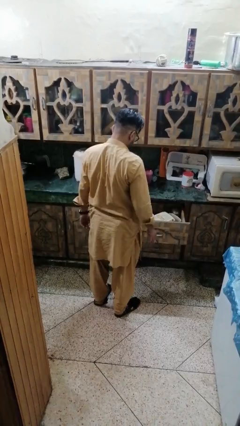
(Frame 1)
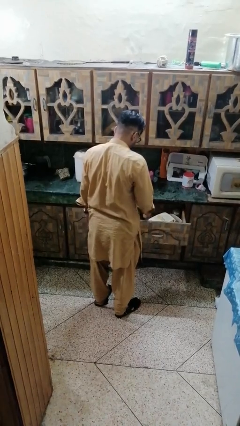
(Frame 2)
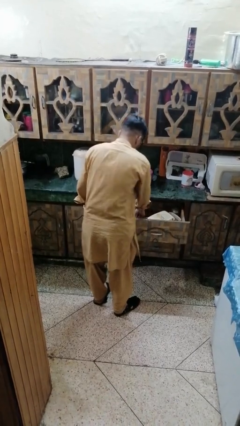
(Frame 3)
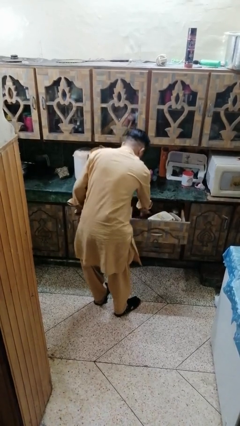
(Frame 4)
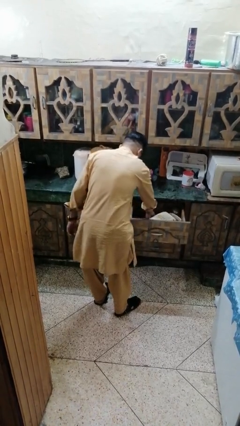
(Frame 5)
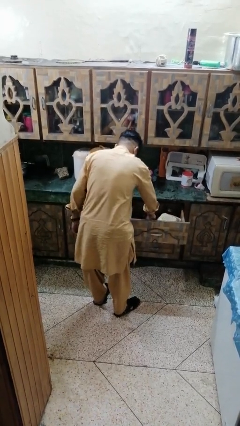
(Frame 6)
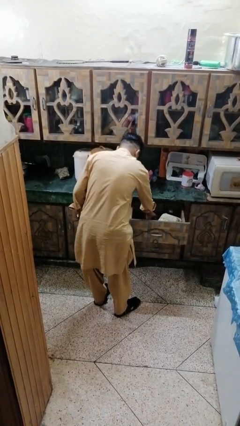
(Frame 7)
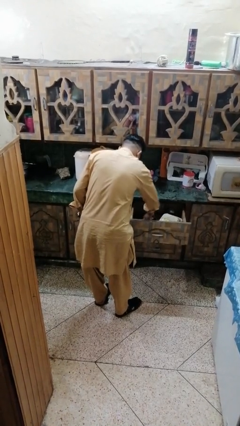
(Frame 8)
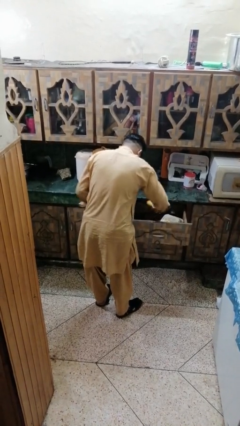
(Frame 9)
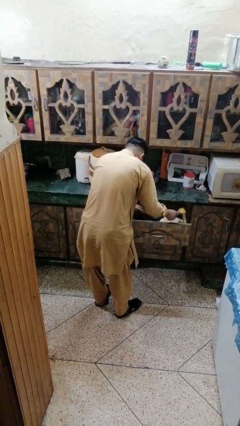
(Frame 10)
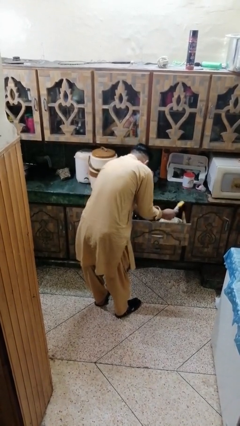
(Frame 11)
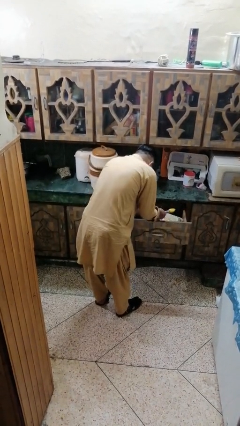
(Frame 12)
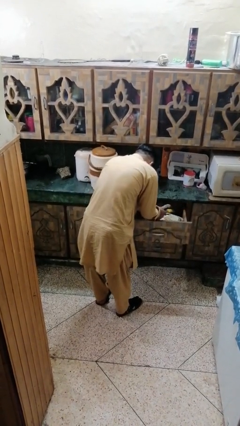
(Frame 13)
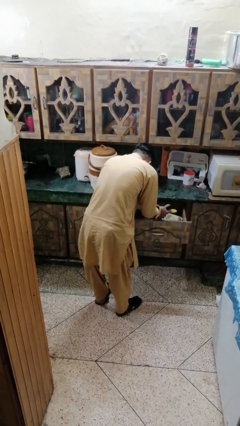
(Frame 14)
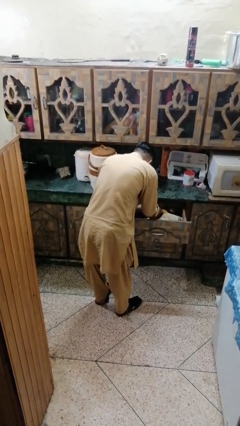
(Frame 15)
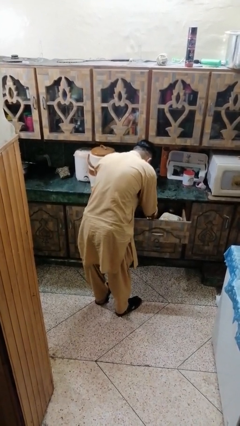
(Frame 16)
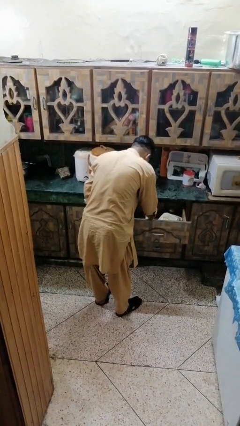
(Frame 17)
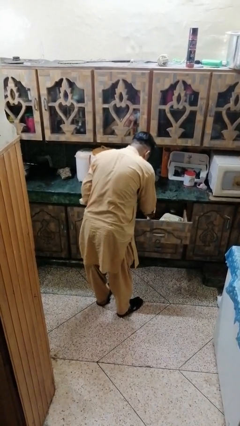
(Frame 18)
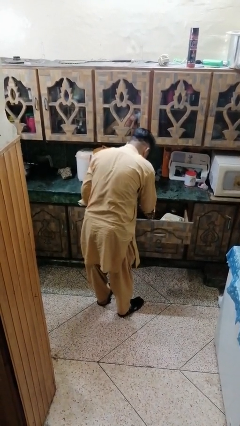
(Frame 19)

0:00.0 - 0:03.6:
person searches in kitchen drawer

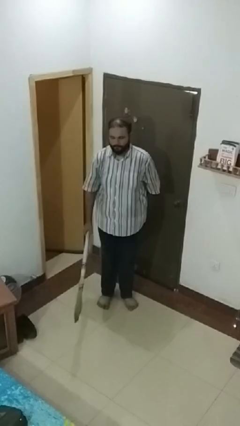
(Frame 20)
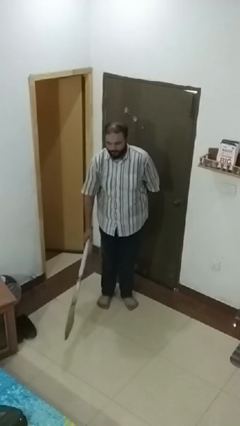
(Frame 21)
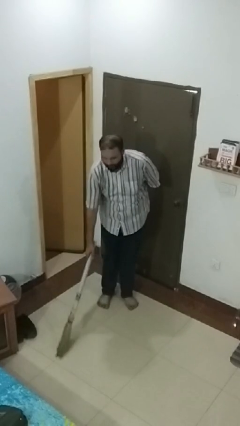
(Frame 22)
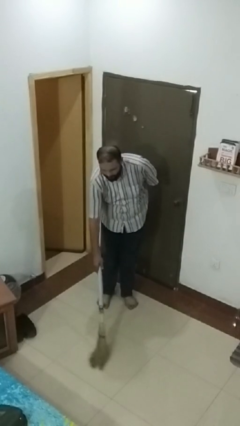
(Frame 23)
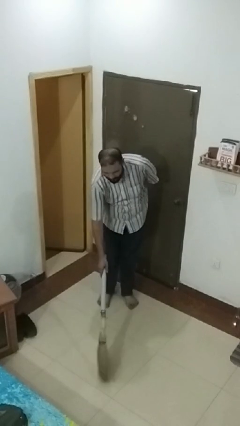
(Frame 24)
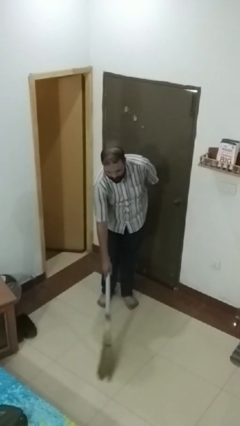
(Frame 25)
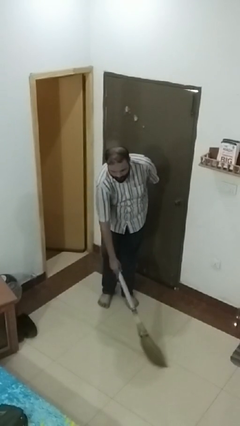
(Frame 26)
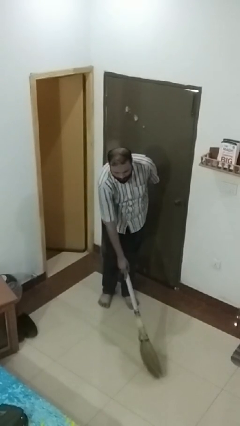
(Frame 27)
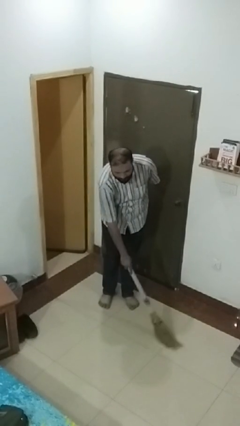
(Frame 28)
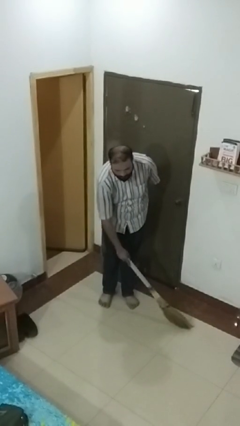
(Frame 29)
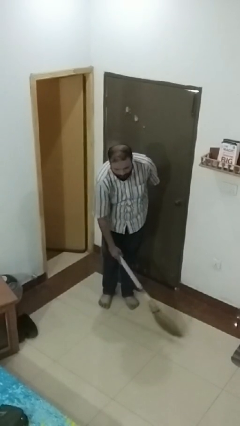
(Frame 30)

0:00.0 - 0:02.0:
person sweeps floor

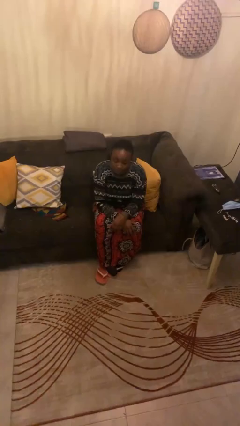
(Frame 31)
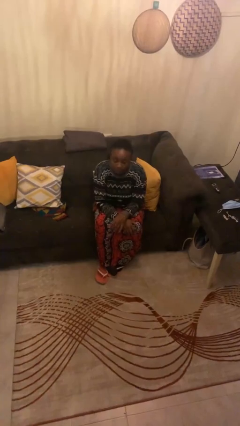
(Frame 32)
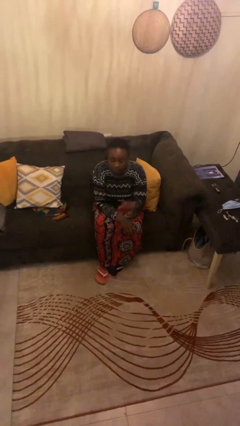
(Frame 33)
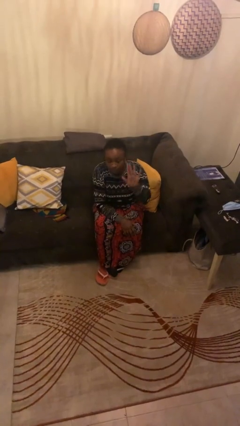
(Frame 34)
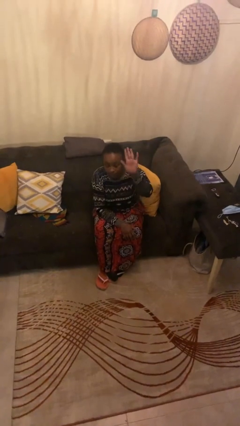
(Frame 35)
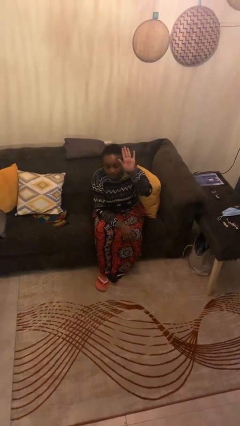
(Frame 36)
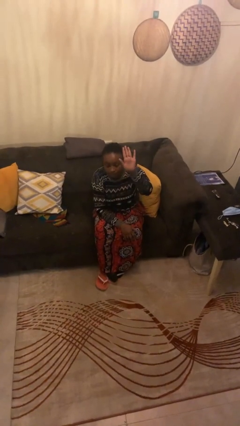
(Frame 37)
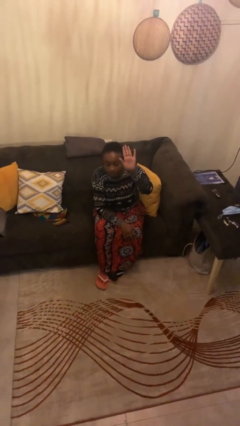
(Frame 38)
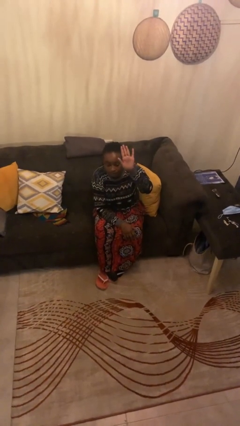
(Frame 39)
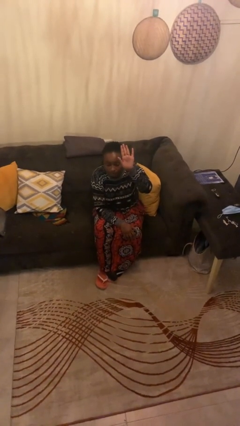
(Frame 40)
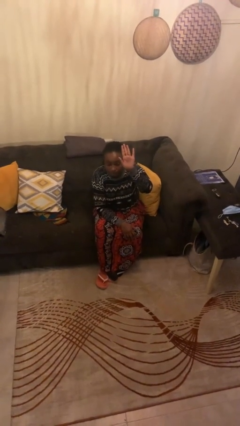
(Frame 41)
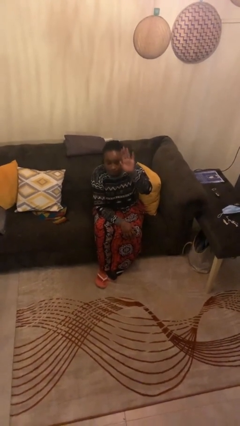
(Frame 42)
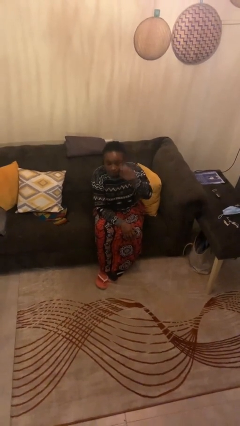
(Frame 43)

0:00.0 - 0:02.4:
person gestures raise hand

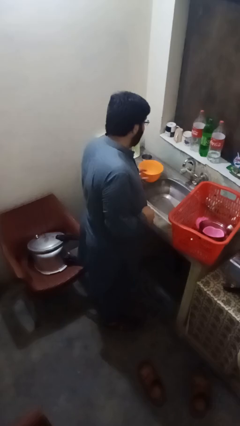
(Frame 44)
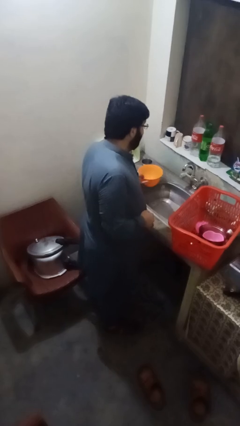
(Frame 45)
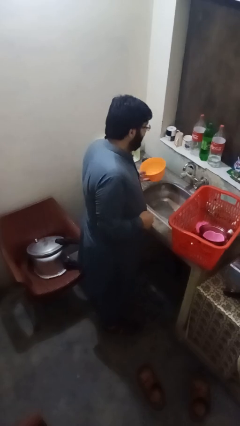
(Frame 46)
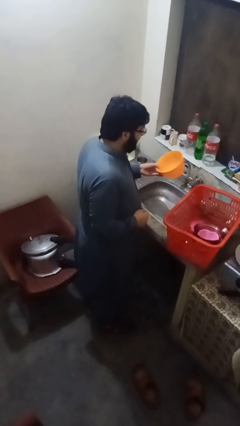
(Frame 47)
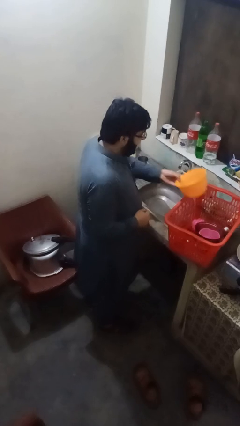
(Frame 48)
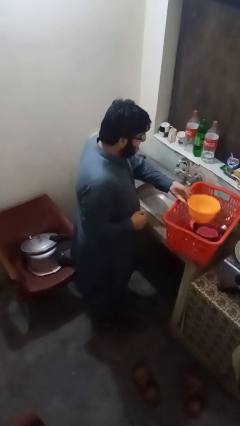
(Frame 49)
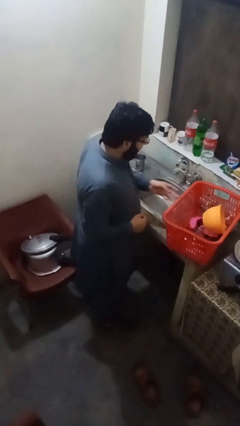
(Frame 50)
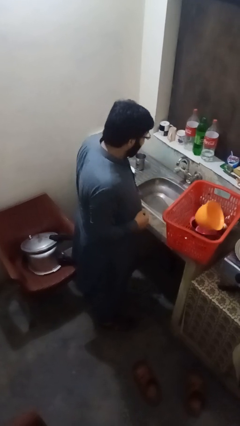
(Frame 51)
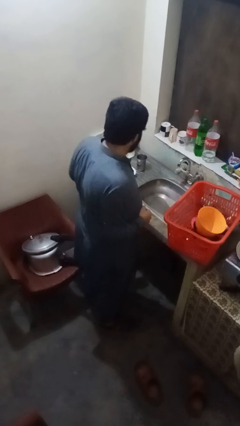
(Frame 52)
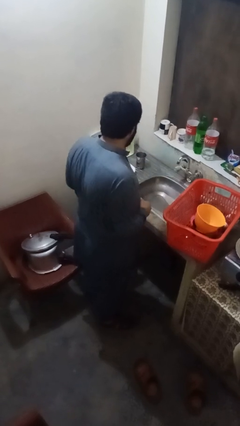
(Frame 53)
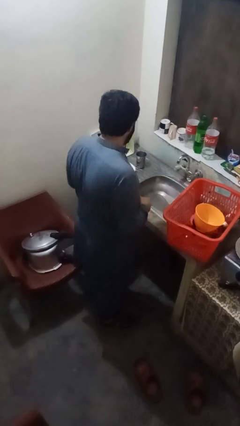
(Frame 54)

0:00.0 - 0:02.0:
person loads dishwasher

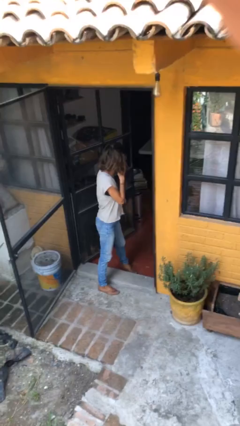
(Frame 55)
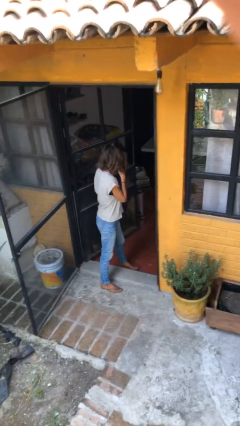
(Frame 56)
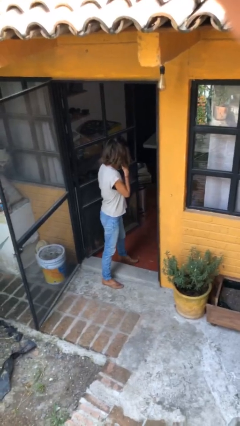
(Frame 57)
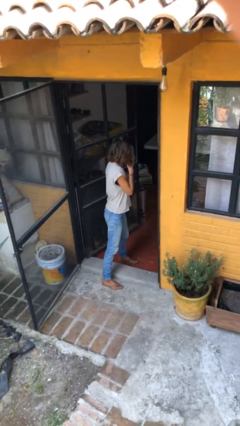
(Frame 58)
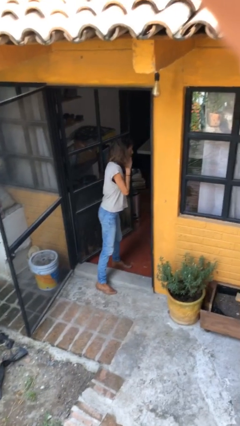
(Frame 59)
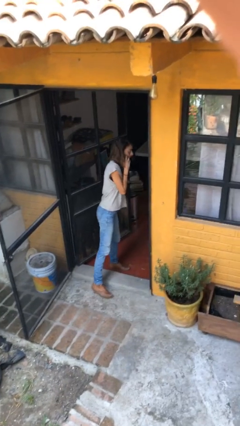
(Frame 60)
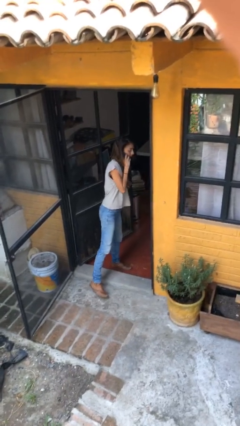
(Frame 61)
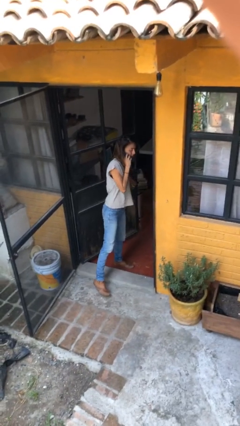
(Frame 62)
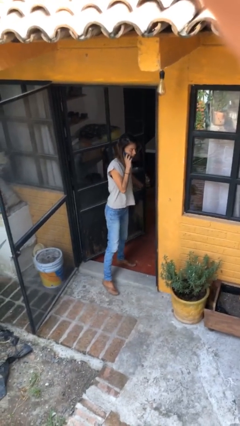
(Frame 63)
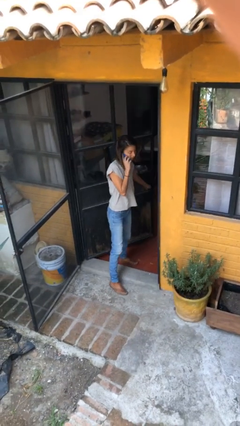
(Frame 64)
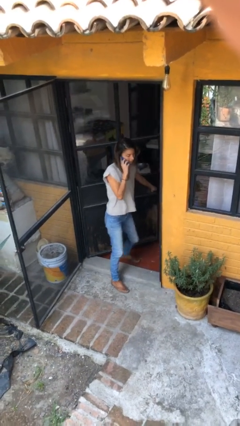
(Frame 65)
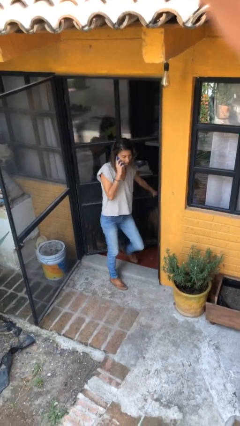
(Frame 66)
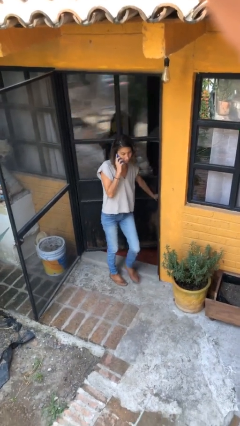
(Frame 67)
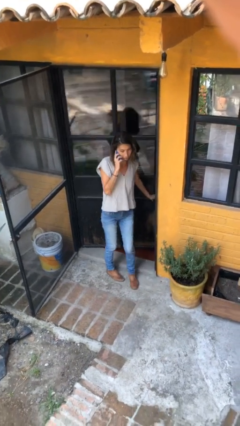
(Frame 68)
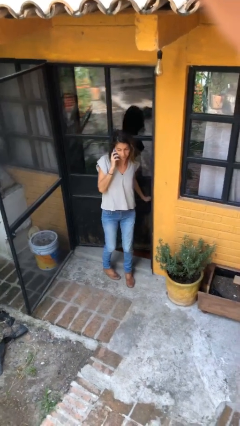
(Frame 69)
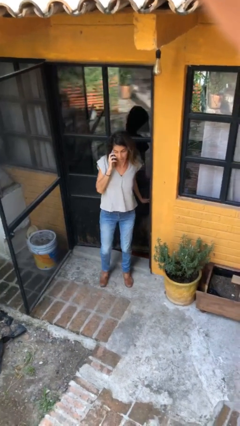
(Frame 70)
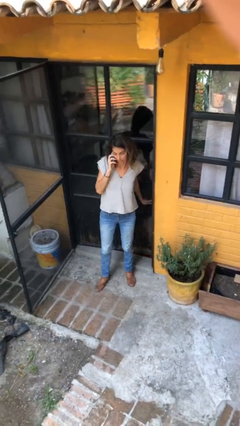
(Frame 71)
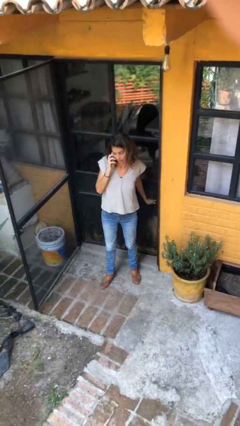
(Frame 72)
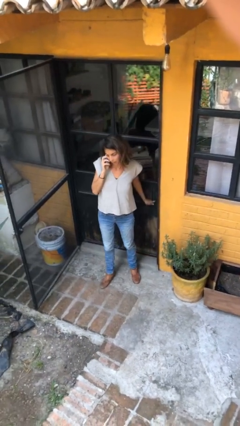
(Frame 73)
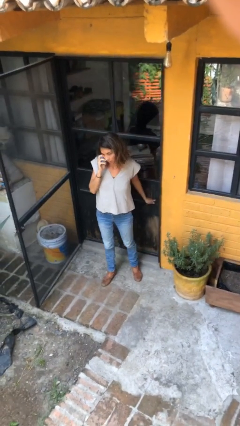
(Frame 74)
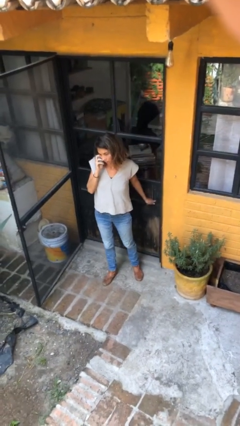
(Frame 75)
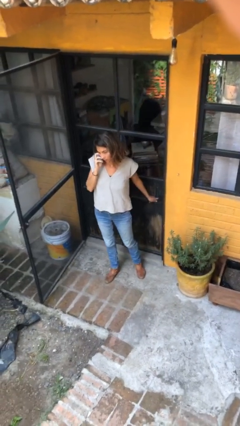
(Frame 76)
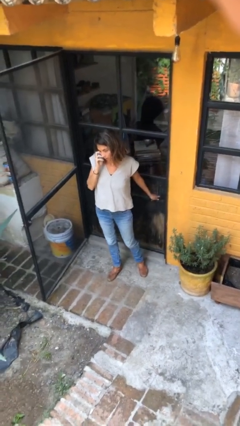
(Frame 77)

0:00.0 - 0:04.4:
person closes facility door

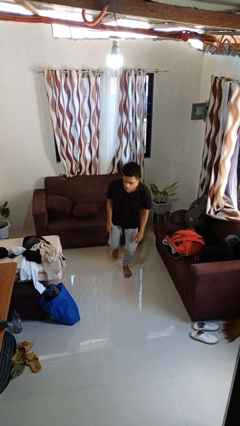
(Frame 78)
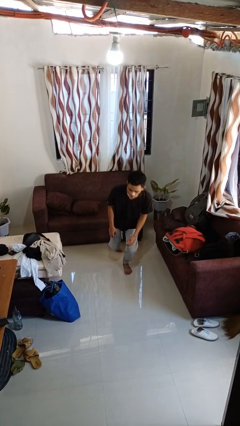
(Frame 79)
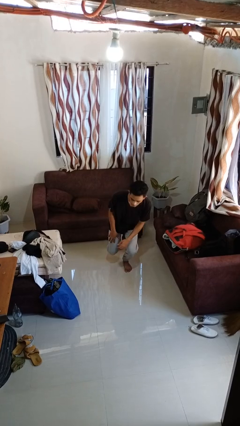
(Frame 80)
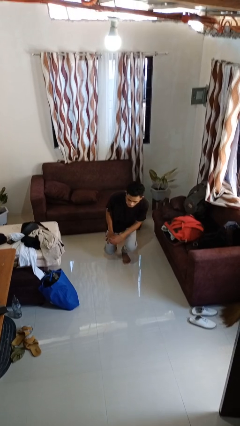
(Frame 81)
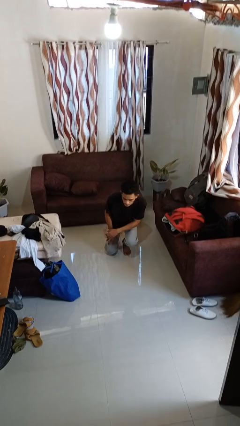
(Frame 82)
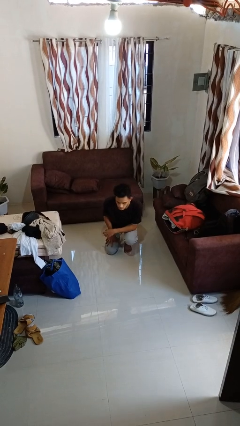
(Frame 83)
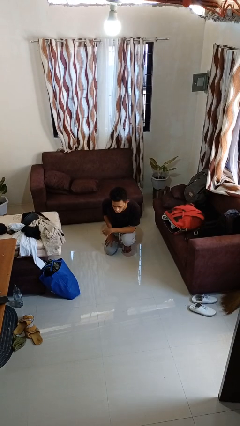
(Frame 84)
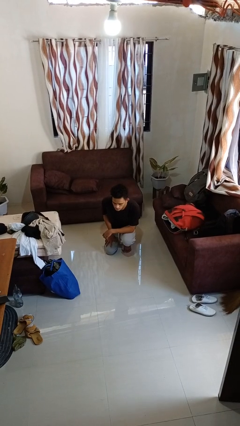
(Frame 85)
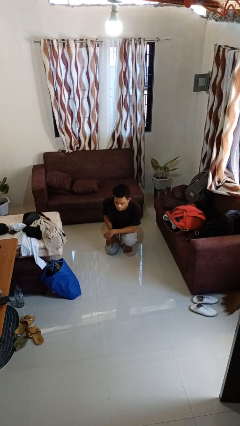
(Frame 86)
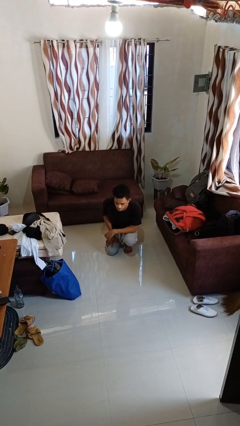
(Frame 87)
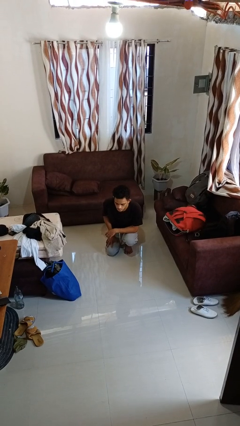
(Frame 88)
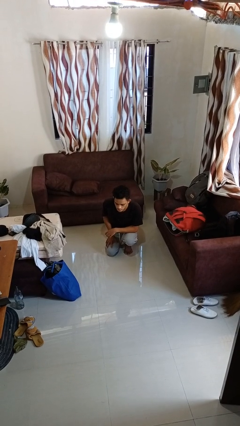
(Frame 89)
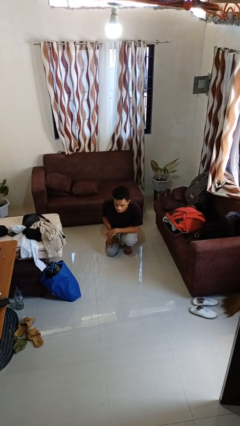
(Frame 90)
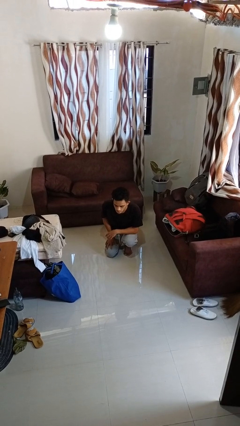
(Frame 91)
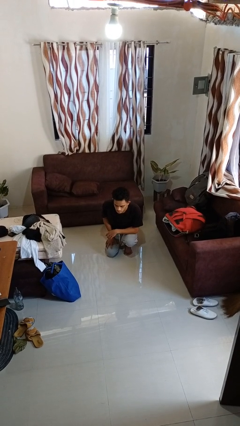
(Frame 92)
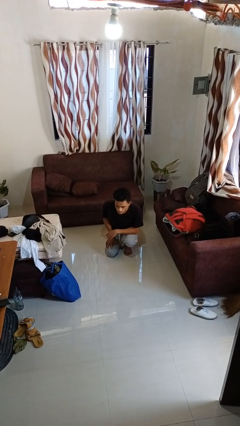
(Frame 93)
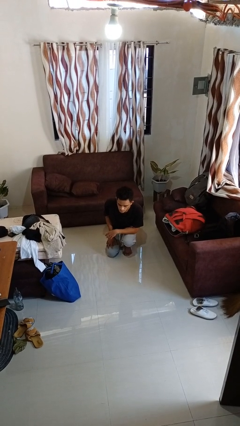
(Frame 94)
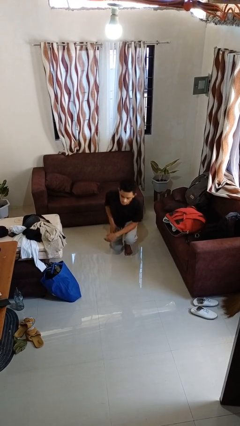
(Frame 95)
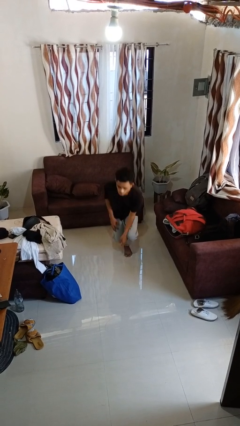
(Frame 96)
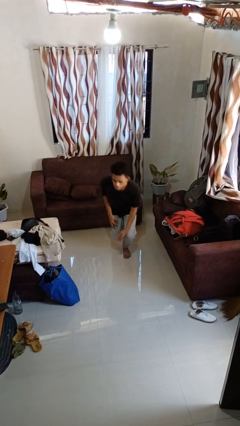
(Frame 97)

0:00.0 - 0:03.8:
person kneels
